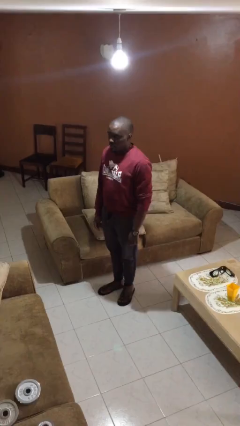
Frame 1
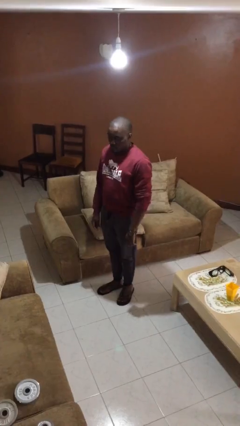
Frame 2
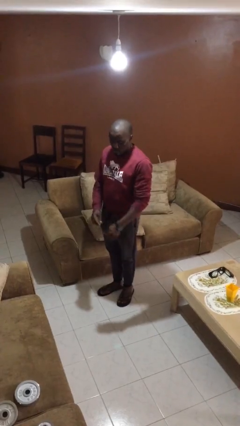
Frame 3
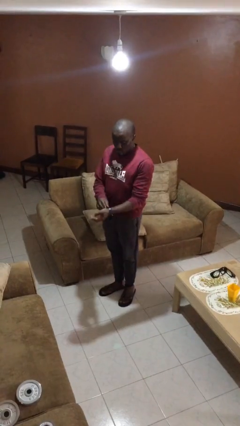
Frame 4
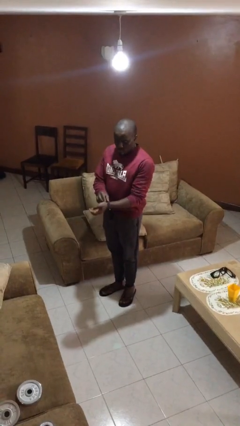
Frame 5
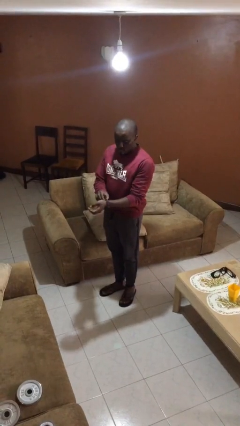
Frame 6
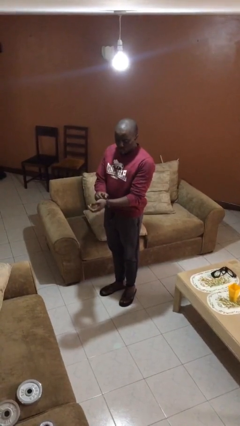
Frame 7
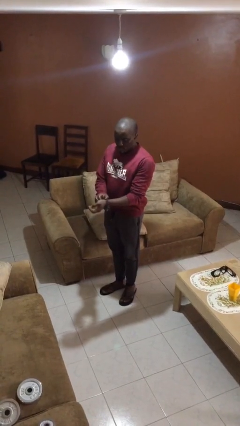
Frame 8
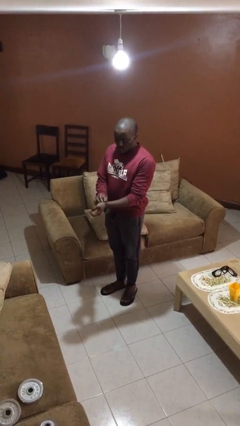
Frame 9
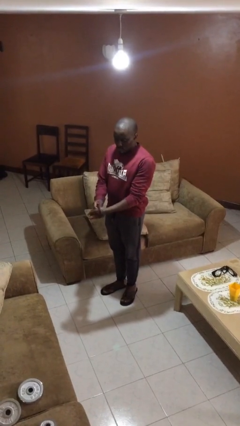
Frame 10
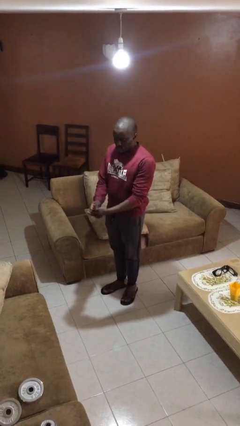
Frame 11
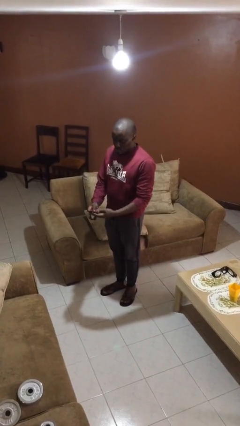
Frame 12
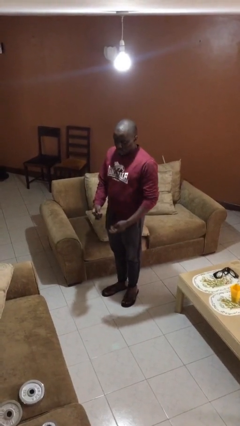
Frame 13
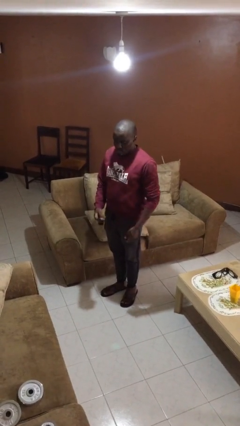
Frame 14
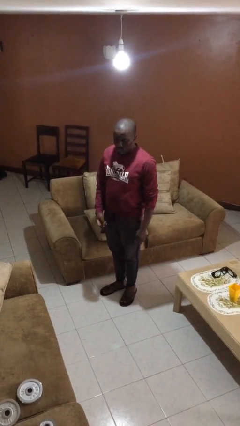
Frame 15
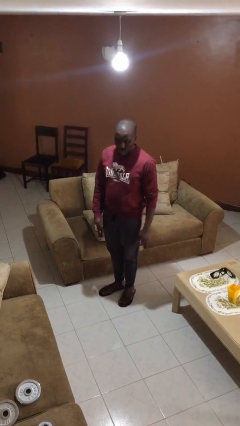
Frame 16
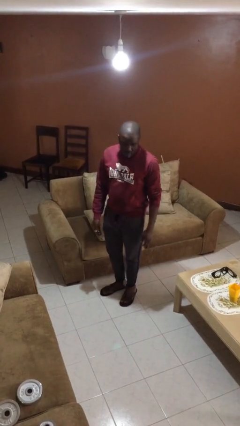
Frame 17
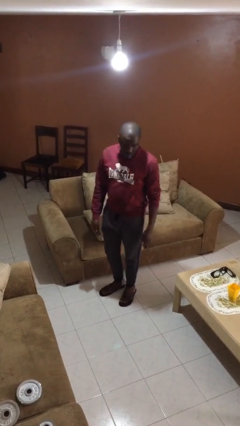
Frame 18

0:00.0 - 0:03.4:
person takes off wristwatch

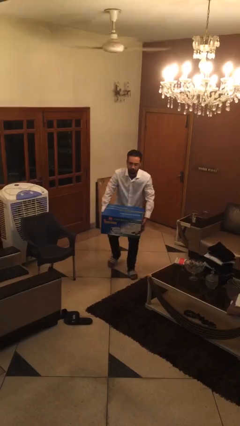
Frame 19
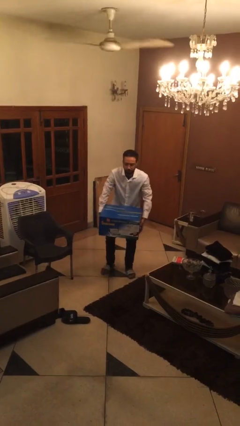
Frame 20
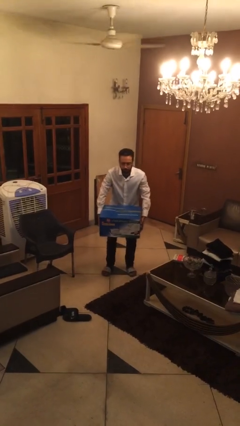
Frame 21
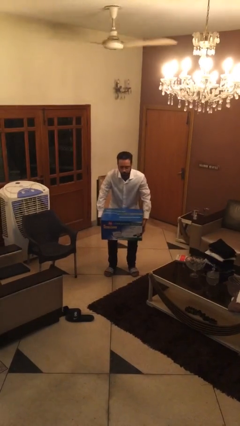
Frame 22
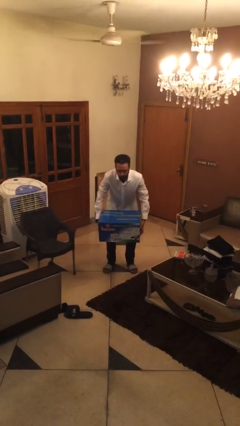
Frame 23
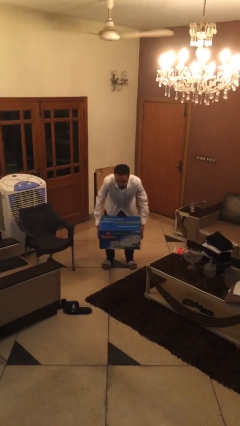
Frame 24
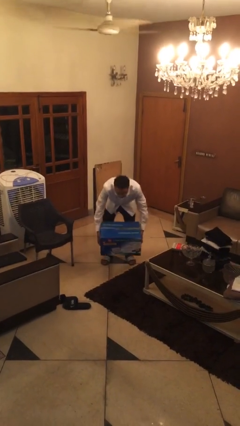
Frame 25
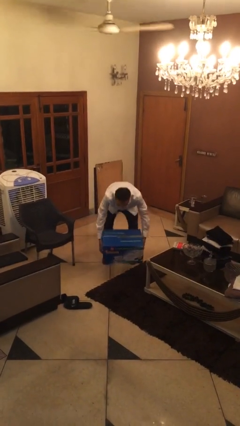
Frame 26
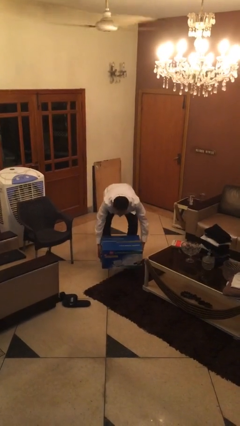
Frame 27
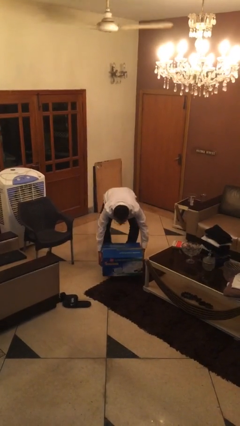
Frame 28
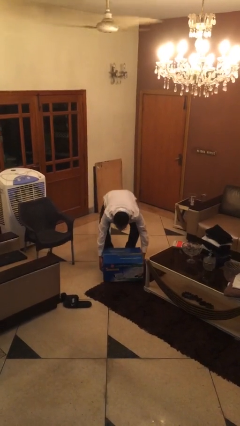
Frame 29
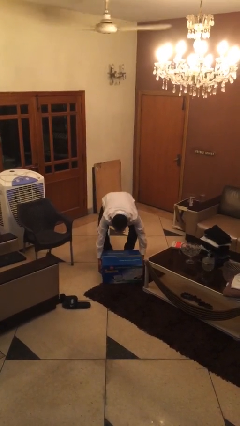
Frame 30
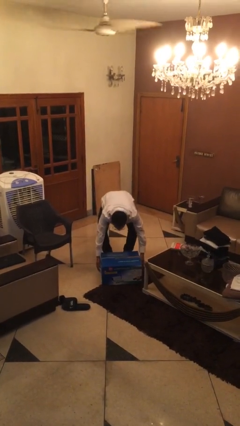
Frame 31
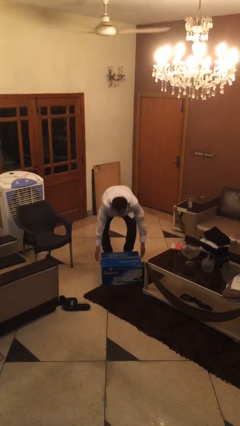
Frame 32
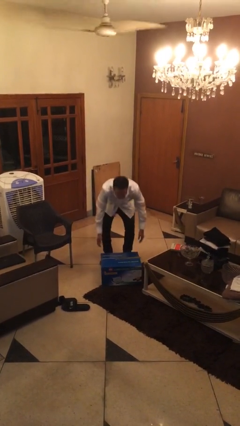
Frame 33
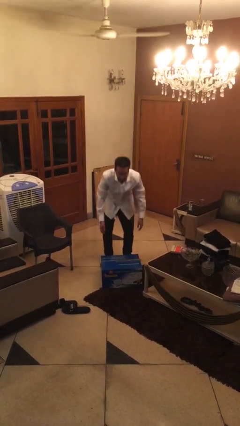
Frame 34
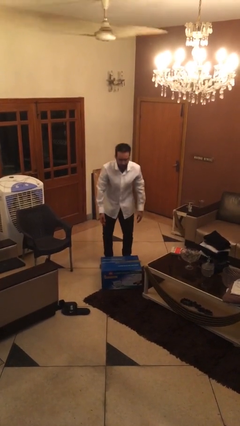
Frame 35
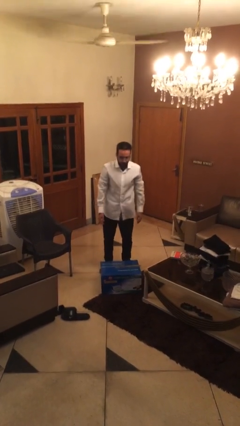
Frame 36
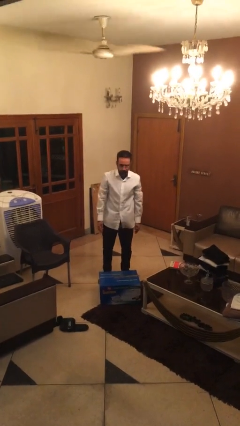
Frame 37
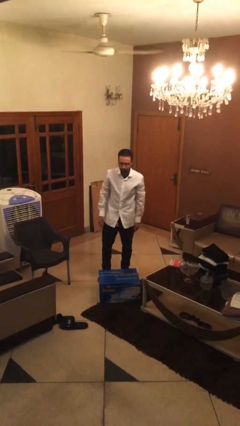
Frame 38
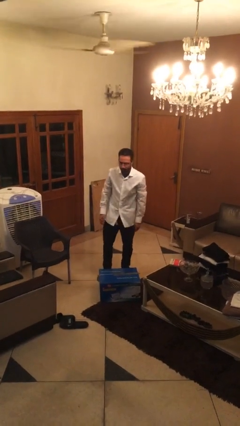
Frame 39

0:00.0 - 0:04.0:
person puts down object on floor

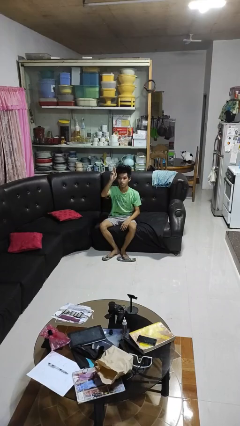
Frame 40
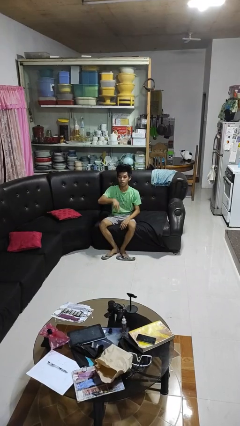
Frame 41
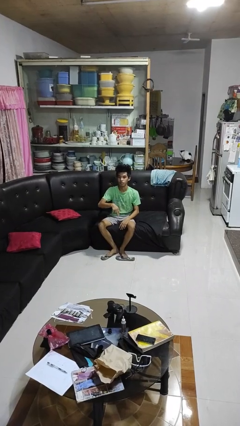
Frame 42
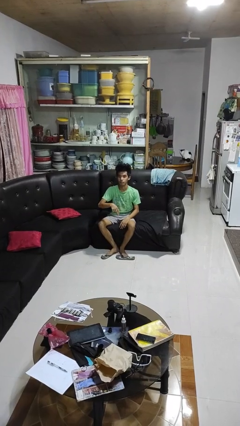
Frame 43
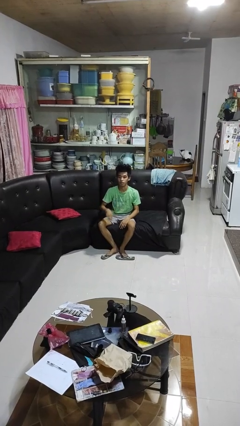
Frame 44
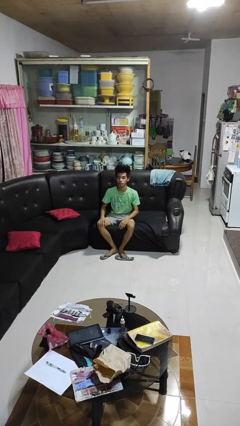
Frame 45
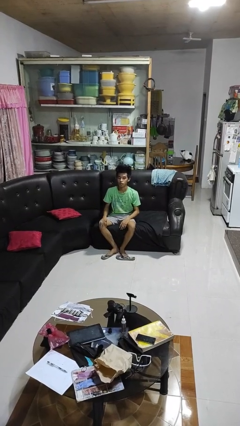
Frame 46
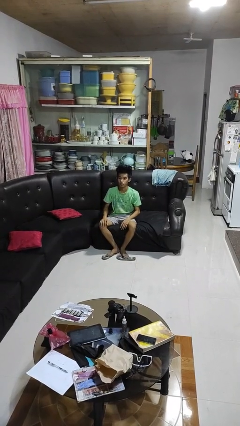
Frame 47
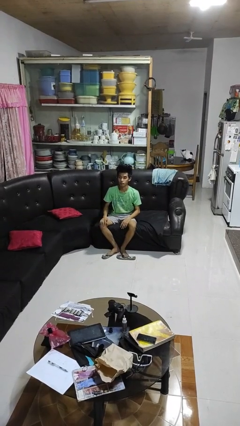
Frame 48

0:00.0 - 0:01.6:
person gestures swipe down

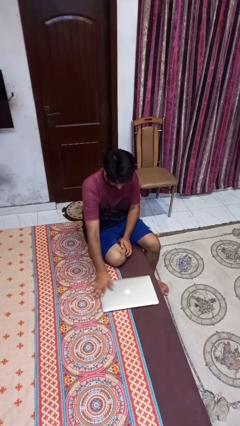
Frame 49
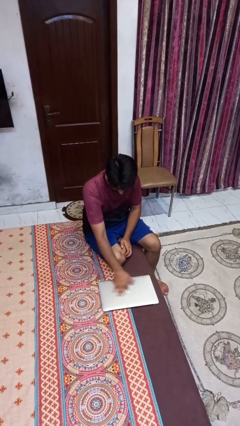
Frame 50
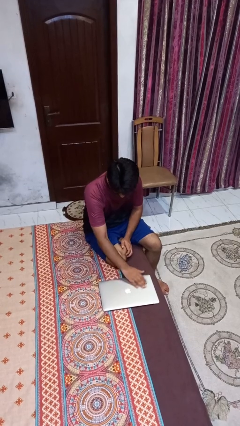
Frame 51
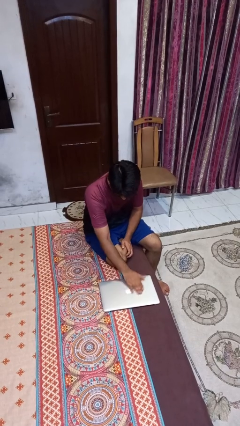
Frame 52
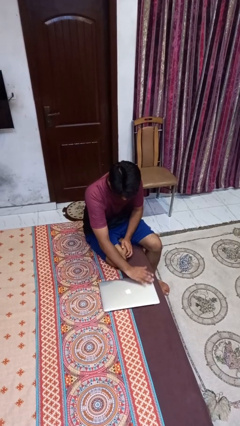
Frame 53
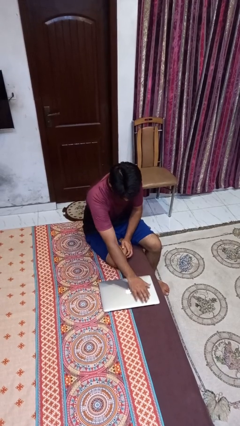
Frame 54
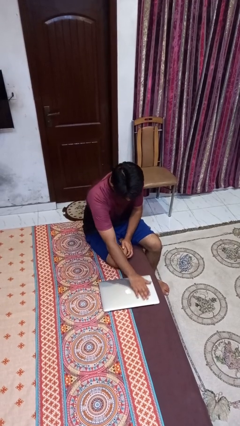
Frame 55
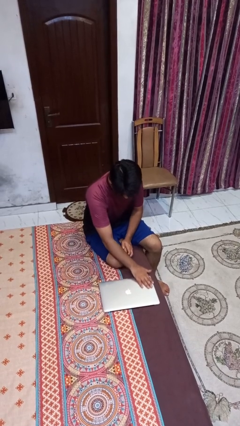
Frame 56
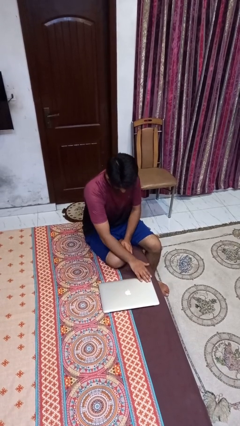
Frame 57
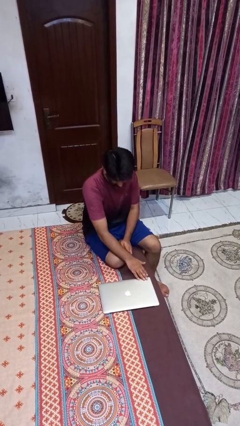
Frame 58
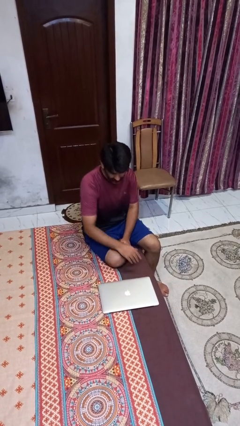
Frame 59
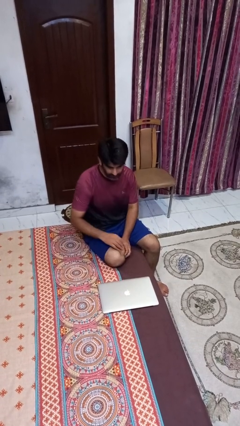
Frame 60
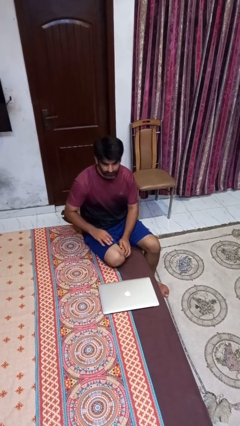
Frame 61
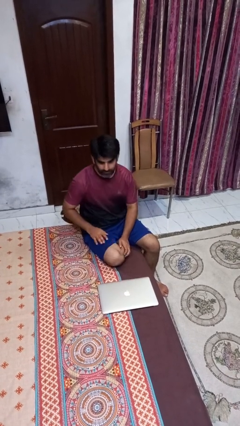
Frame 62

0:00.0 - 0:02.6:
person waves hand over object

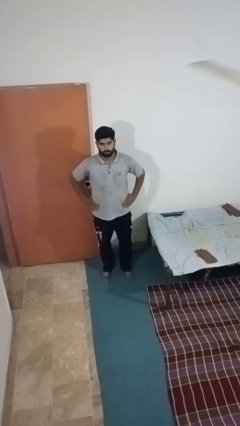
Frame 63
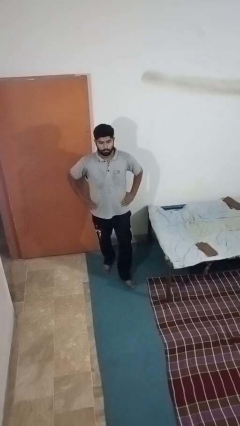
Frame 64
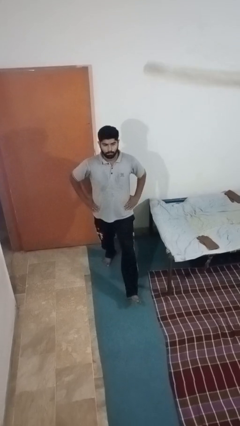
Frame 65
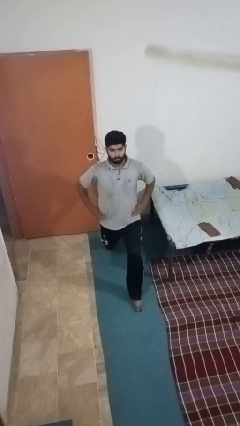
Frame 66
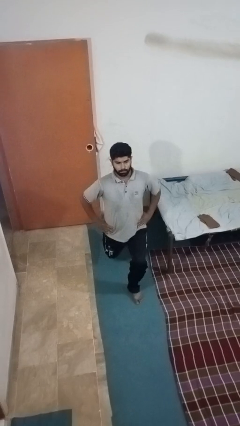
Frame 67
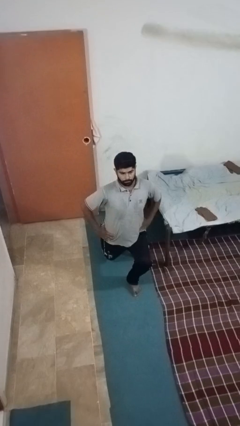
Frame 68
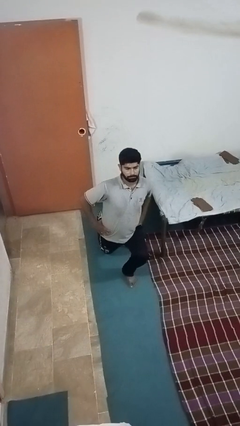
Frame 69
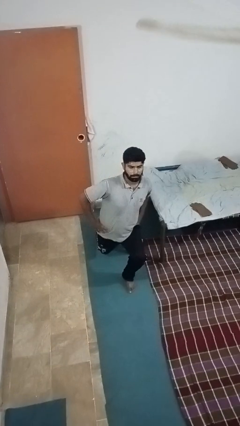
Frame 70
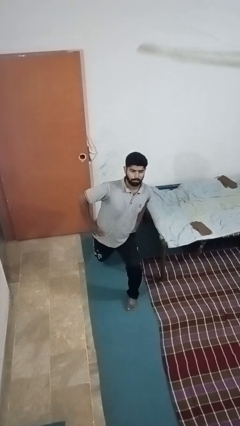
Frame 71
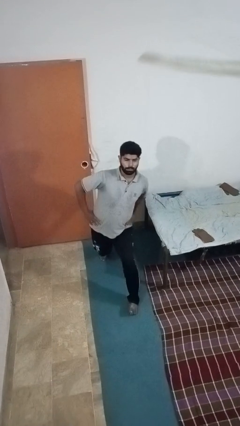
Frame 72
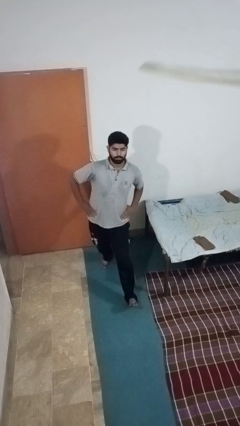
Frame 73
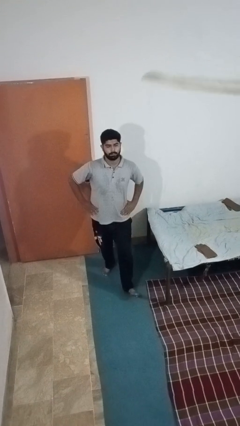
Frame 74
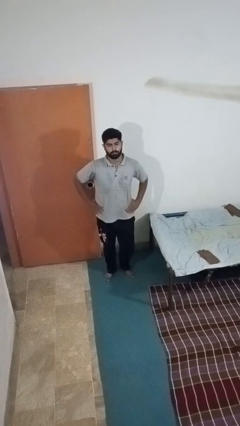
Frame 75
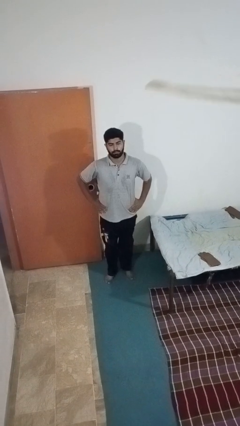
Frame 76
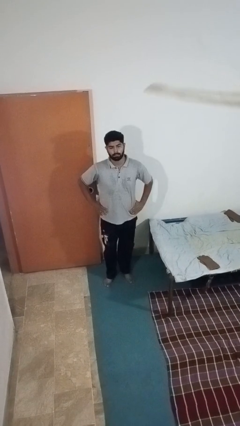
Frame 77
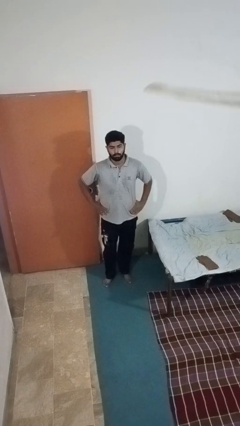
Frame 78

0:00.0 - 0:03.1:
person exercises with lunges

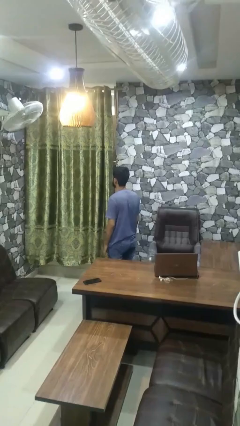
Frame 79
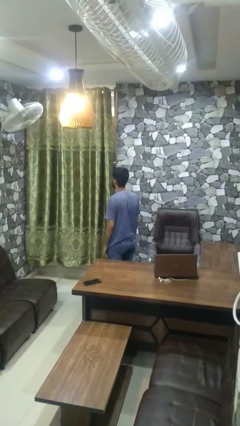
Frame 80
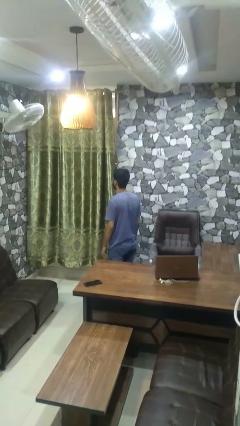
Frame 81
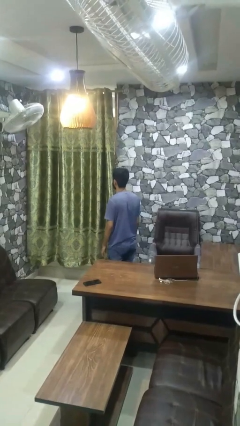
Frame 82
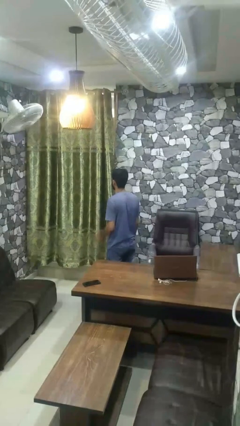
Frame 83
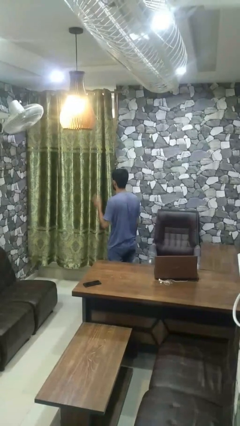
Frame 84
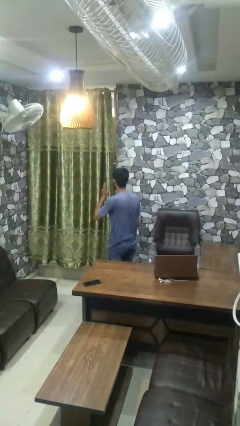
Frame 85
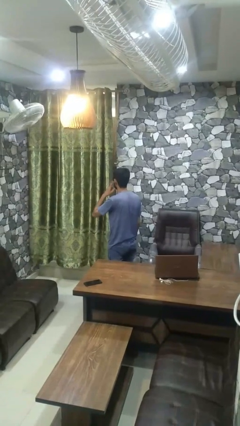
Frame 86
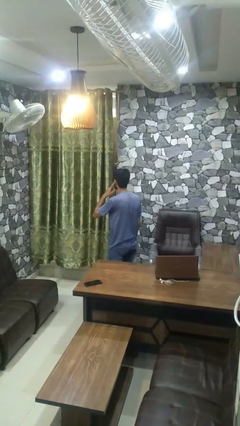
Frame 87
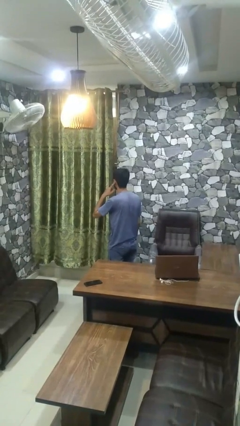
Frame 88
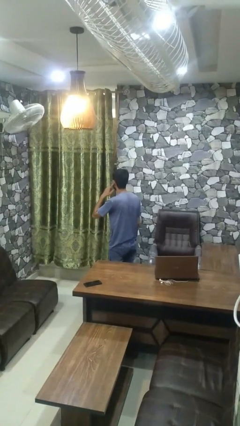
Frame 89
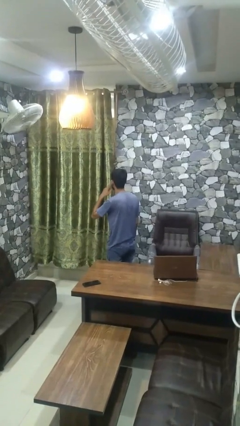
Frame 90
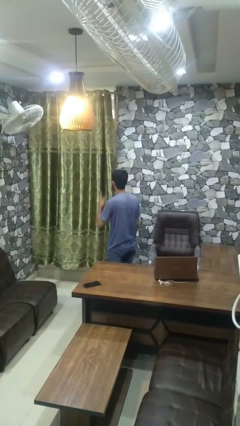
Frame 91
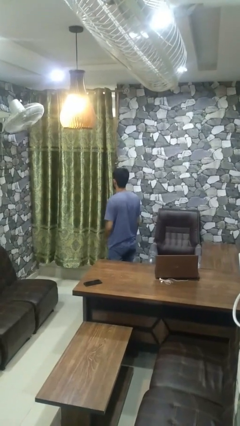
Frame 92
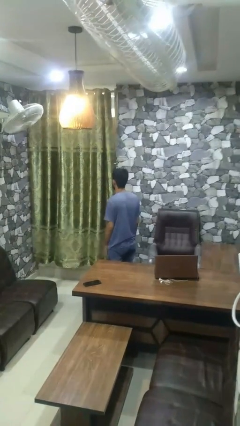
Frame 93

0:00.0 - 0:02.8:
person gestures listen closely
